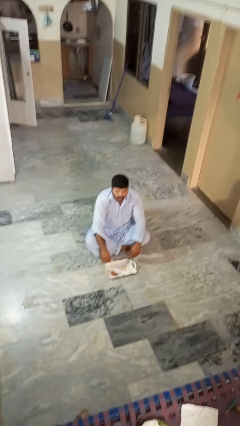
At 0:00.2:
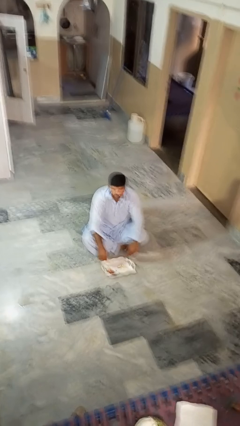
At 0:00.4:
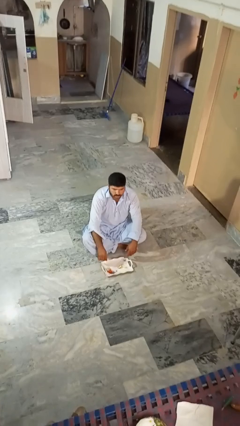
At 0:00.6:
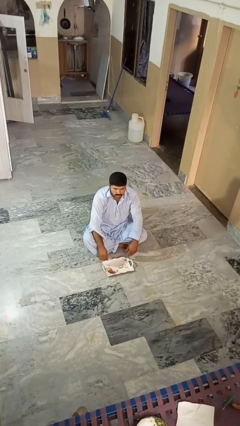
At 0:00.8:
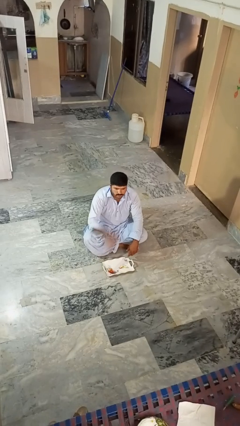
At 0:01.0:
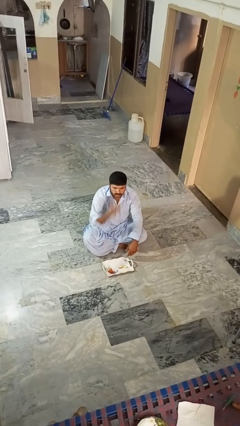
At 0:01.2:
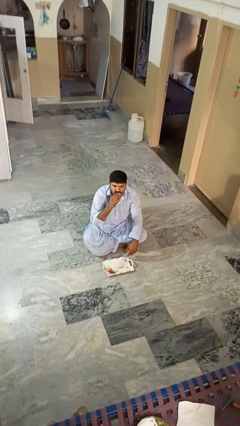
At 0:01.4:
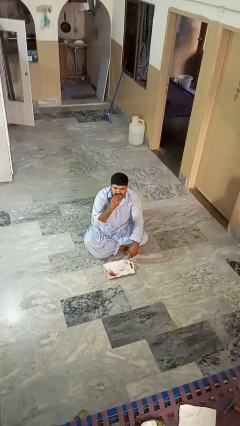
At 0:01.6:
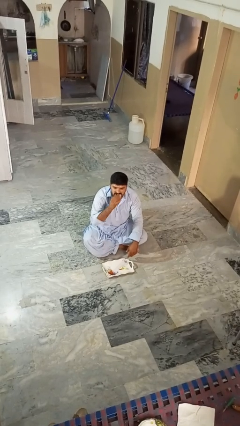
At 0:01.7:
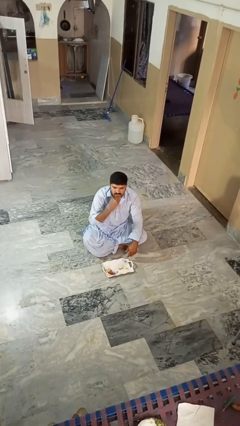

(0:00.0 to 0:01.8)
person eats apple

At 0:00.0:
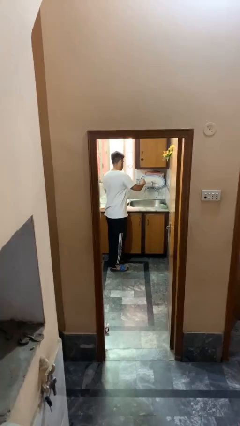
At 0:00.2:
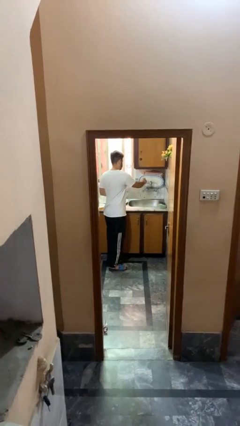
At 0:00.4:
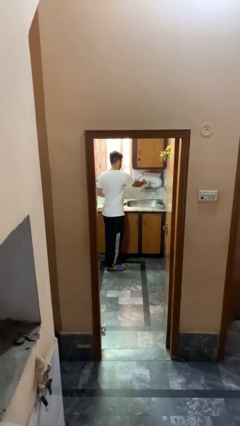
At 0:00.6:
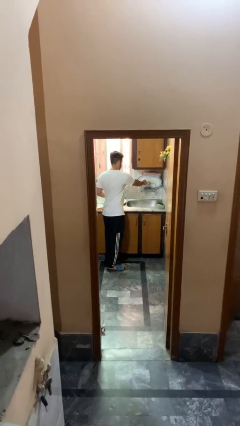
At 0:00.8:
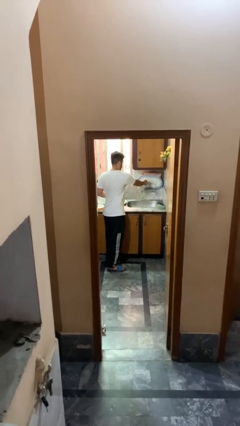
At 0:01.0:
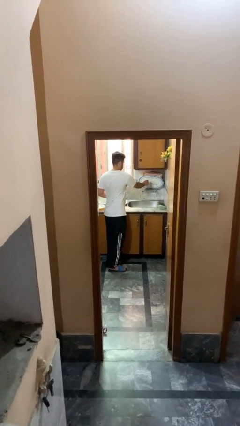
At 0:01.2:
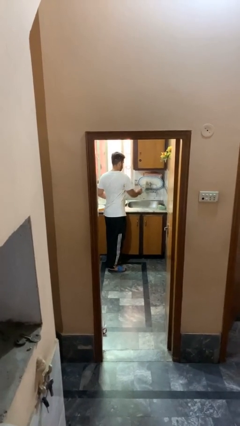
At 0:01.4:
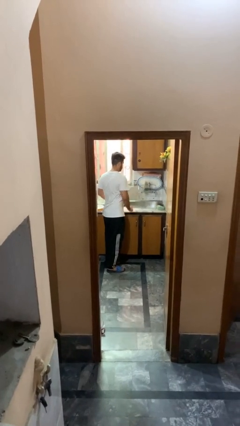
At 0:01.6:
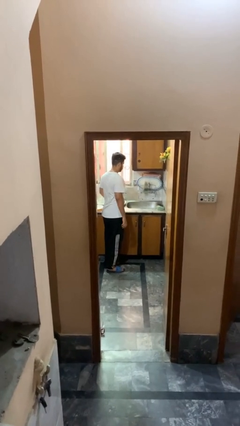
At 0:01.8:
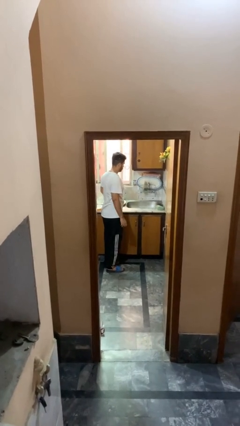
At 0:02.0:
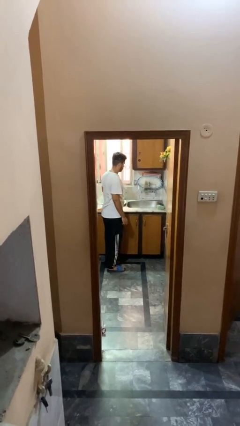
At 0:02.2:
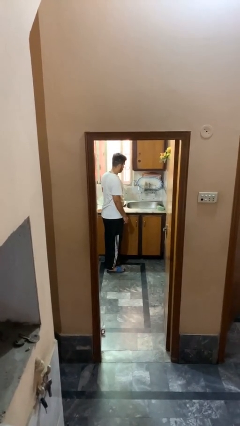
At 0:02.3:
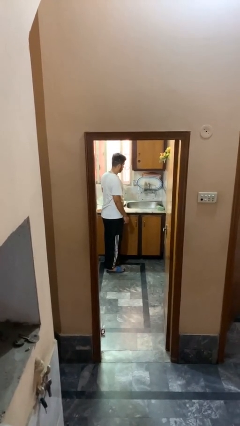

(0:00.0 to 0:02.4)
person loads dishwasher

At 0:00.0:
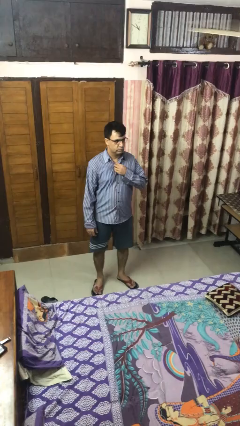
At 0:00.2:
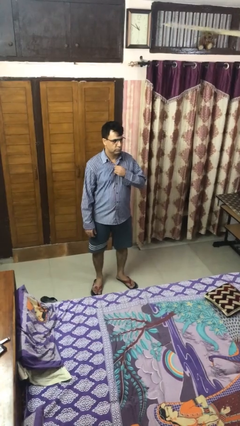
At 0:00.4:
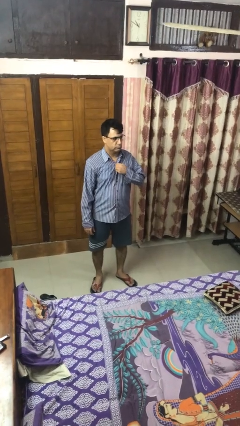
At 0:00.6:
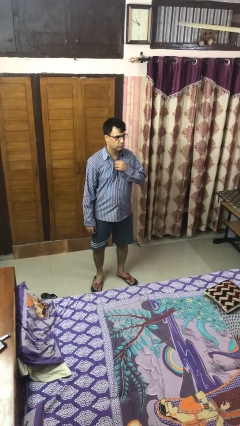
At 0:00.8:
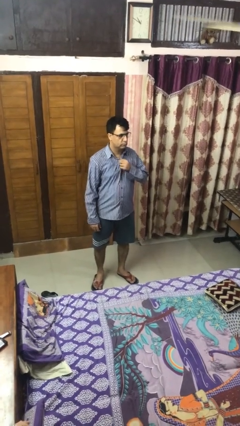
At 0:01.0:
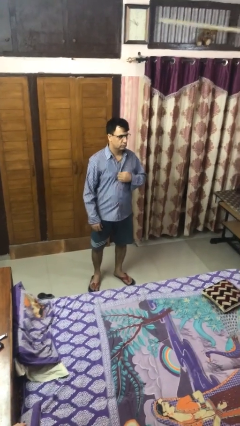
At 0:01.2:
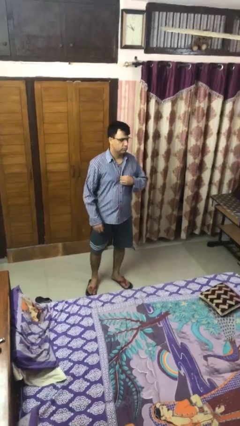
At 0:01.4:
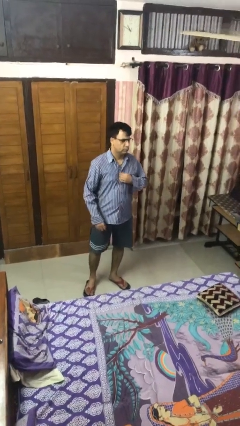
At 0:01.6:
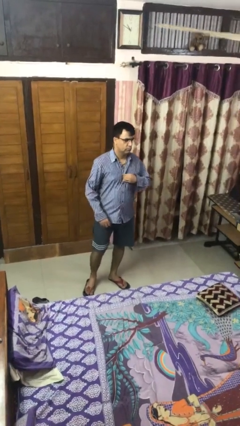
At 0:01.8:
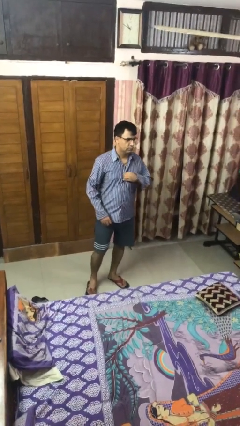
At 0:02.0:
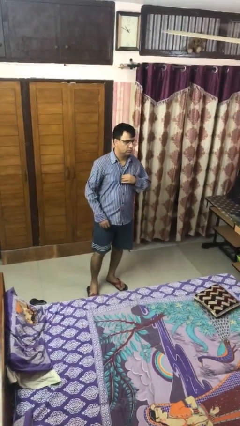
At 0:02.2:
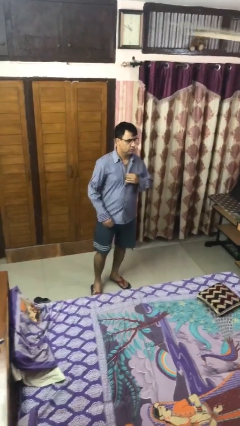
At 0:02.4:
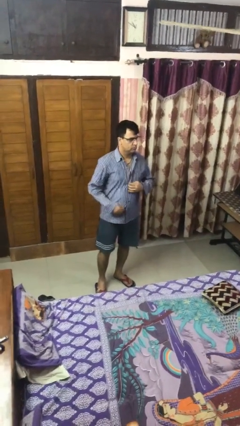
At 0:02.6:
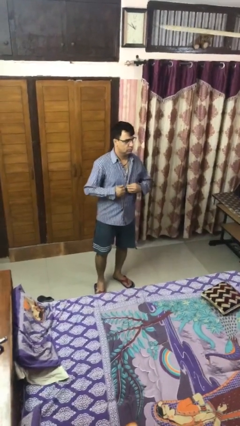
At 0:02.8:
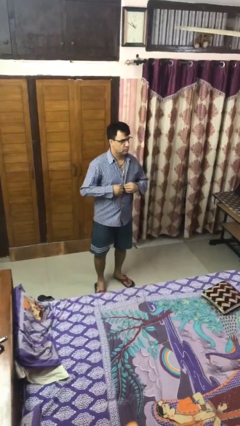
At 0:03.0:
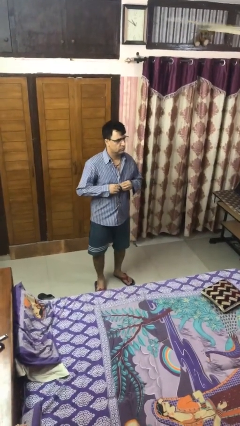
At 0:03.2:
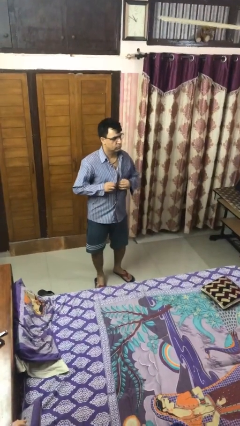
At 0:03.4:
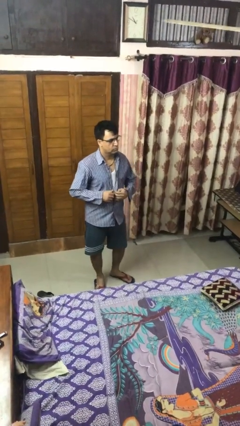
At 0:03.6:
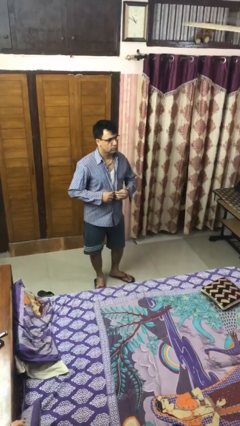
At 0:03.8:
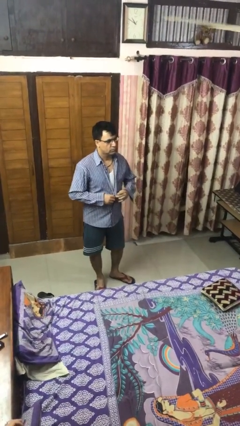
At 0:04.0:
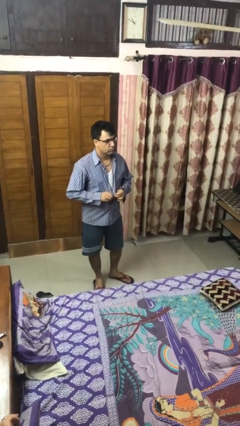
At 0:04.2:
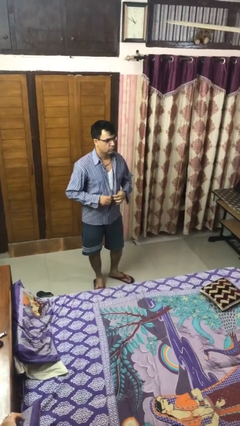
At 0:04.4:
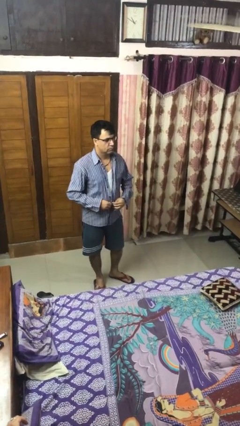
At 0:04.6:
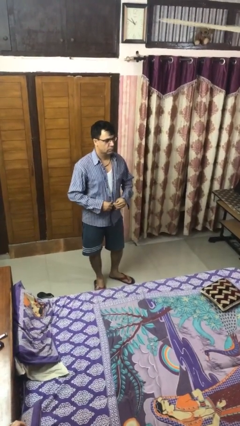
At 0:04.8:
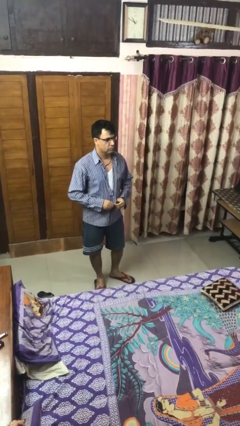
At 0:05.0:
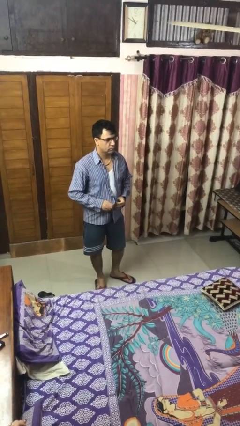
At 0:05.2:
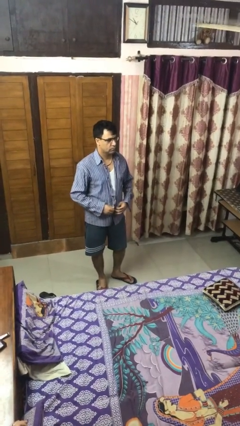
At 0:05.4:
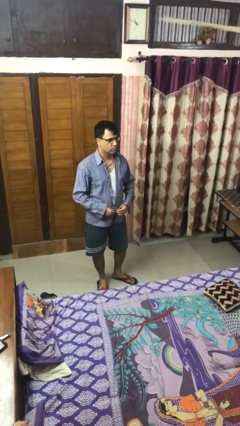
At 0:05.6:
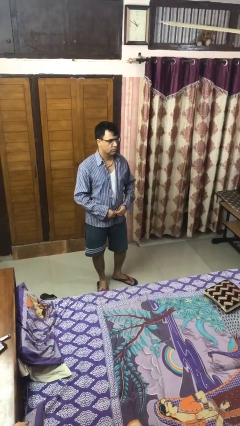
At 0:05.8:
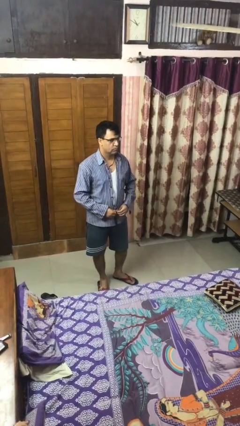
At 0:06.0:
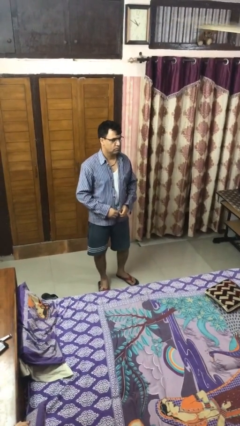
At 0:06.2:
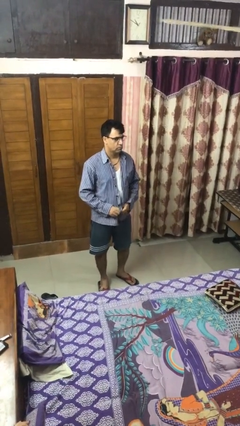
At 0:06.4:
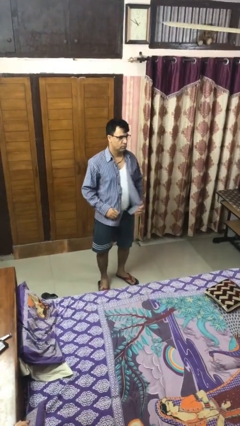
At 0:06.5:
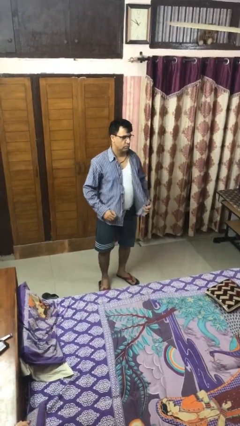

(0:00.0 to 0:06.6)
person unbuttons shirt

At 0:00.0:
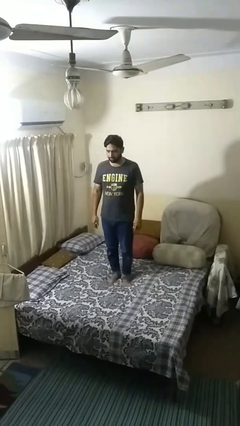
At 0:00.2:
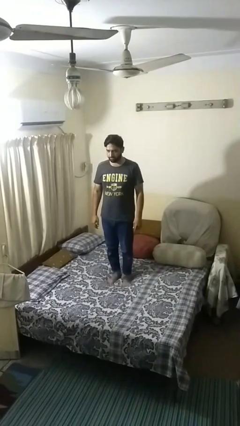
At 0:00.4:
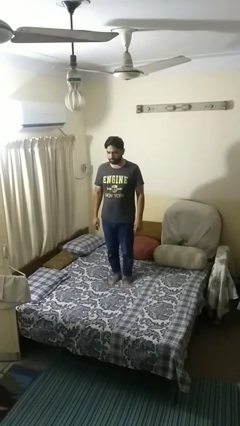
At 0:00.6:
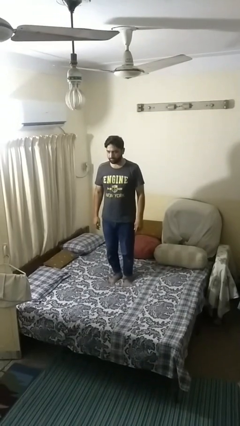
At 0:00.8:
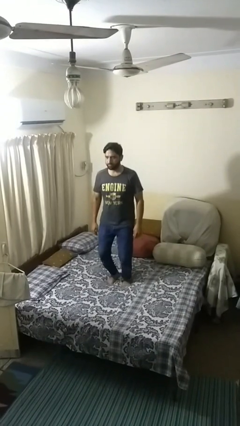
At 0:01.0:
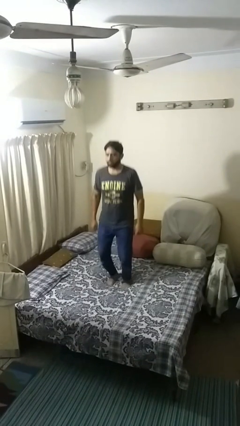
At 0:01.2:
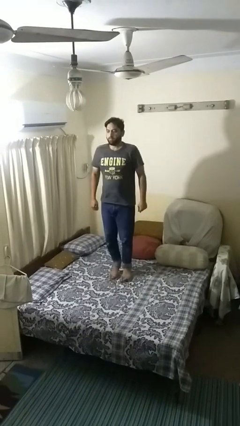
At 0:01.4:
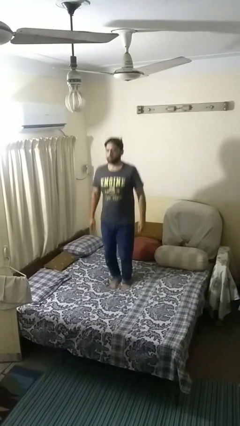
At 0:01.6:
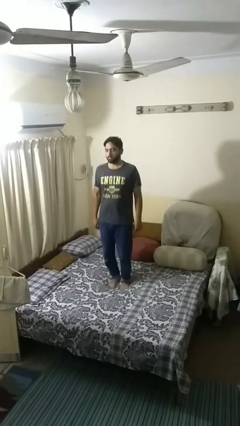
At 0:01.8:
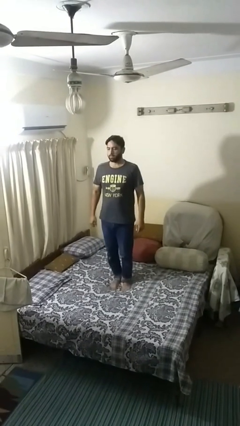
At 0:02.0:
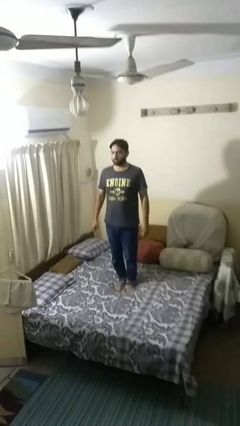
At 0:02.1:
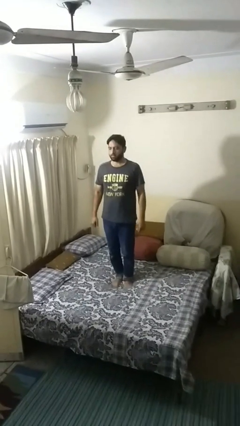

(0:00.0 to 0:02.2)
person jumps on bed

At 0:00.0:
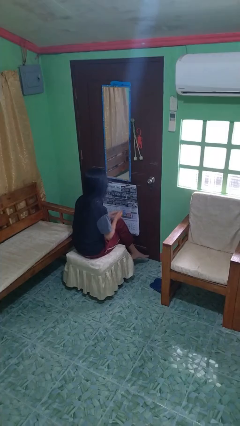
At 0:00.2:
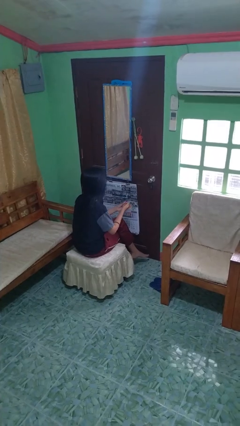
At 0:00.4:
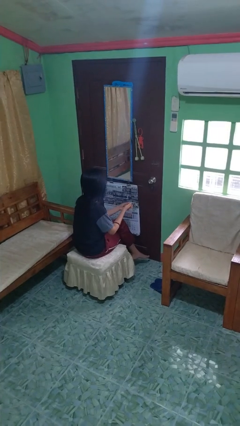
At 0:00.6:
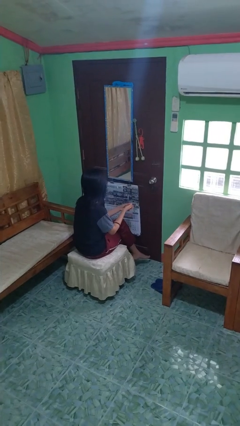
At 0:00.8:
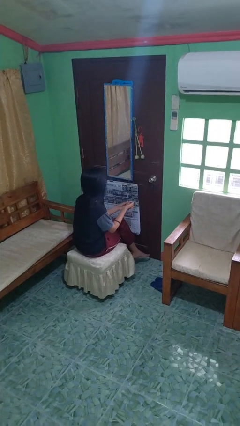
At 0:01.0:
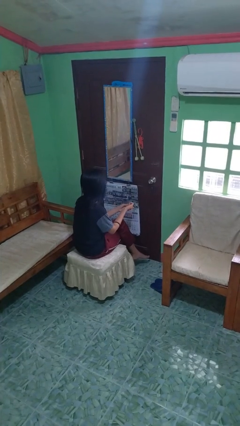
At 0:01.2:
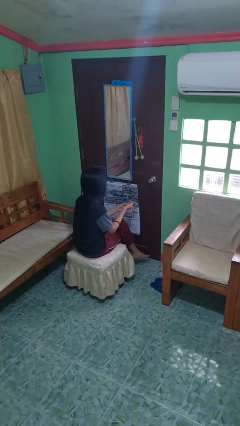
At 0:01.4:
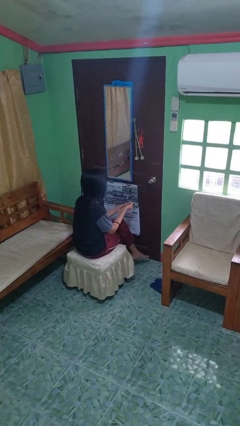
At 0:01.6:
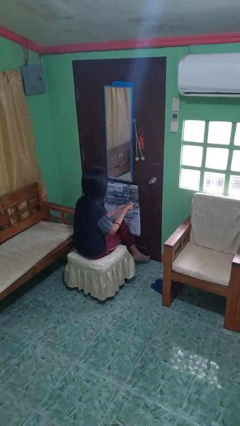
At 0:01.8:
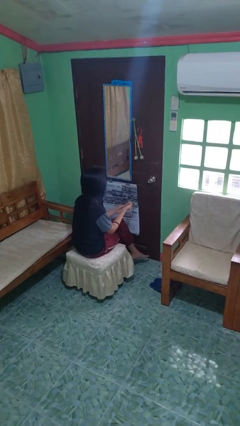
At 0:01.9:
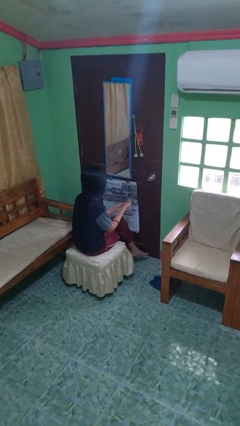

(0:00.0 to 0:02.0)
person cracks knuckles

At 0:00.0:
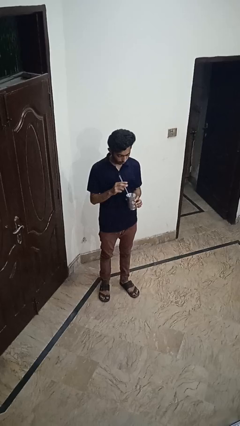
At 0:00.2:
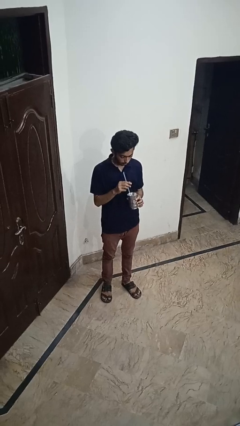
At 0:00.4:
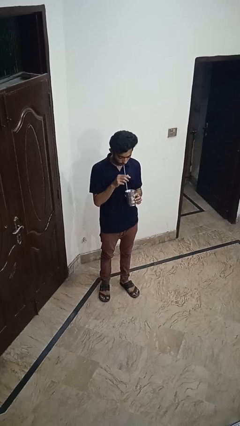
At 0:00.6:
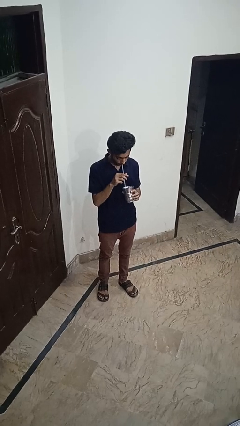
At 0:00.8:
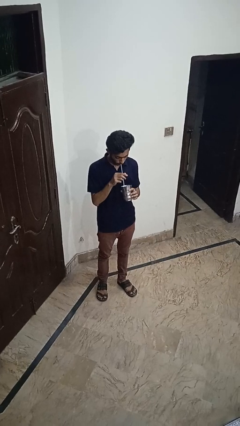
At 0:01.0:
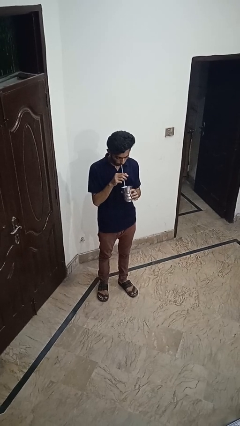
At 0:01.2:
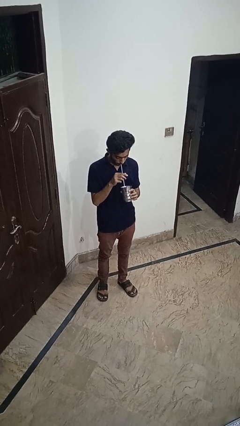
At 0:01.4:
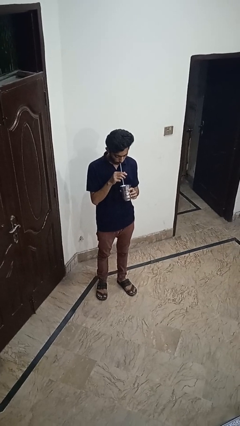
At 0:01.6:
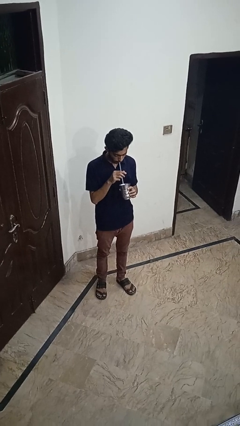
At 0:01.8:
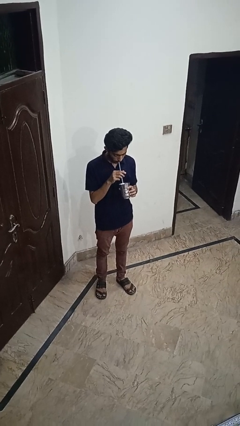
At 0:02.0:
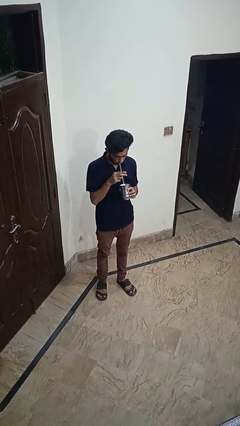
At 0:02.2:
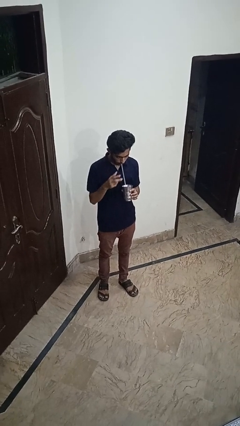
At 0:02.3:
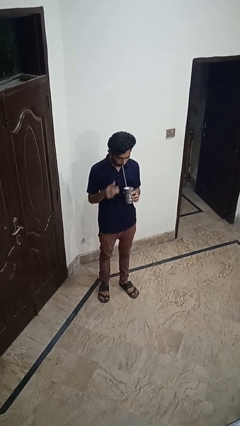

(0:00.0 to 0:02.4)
person drinks from straw
